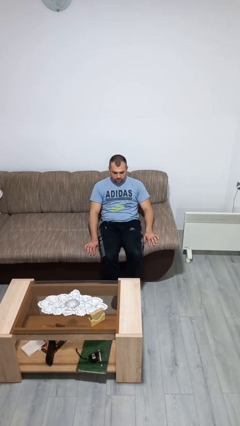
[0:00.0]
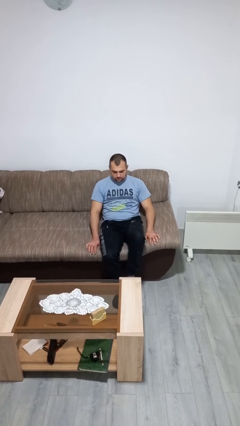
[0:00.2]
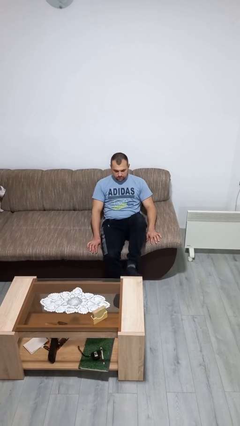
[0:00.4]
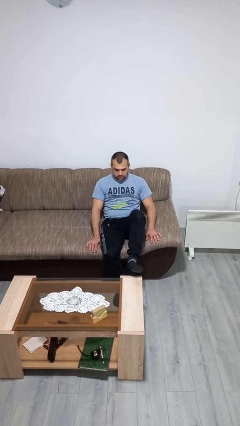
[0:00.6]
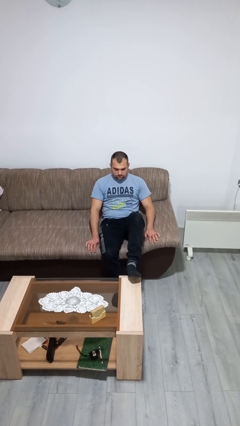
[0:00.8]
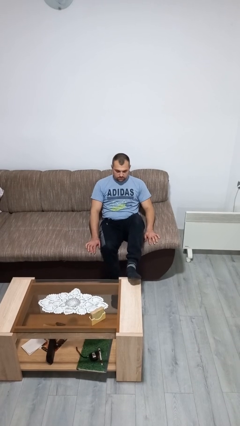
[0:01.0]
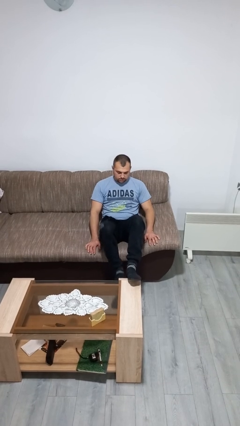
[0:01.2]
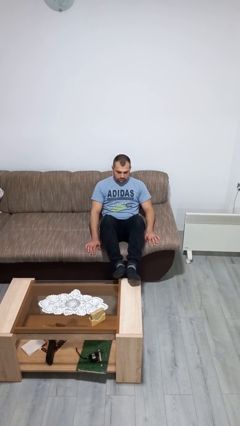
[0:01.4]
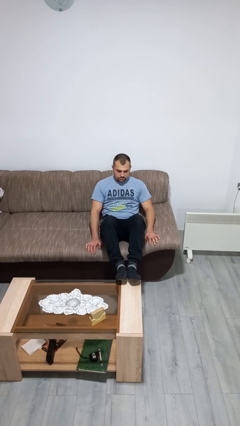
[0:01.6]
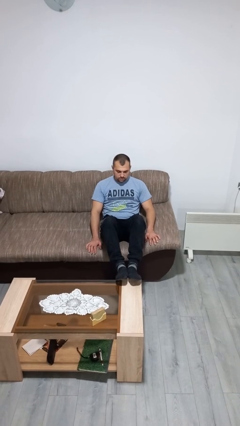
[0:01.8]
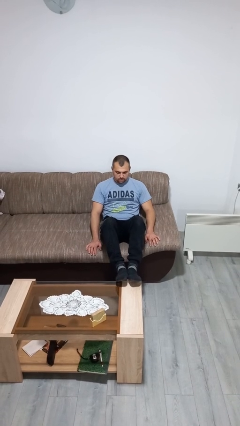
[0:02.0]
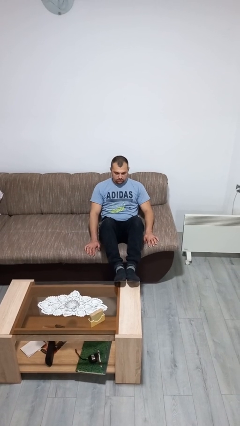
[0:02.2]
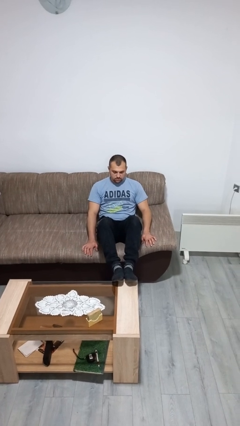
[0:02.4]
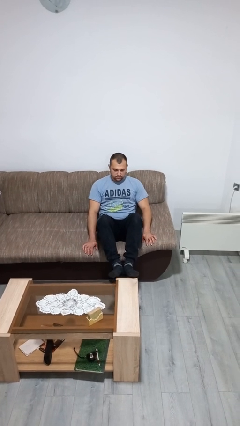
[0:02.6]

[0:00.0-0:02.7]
person puts feet up

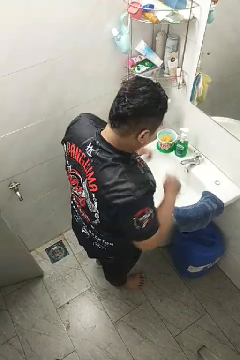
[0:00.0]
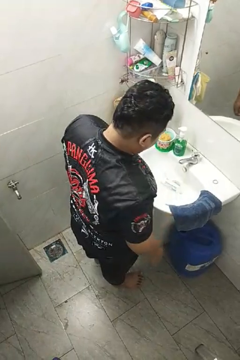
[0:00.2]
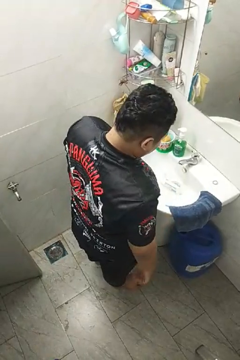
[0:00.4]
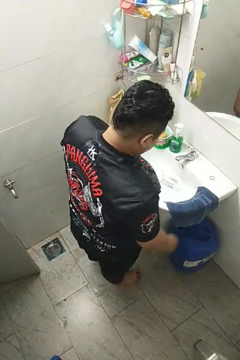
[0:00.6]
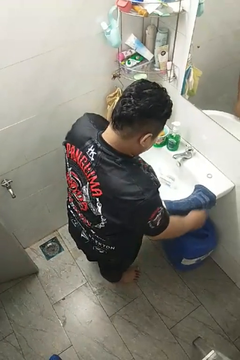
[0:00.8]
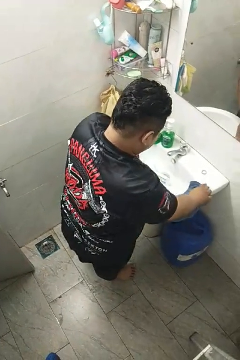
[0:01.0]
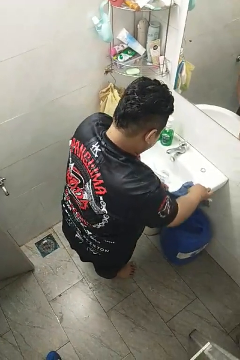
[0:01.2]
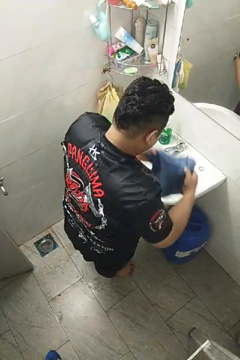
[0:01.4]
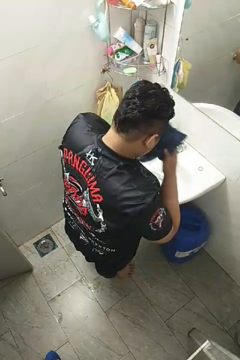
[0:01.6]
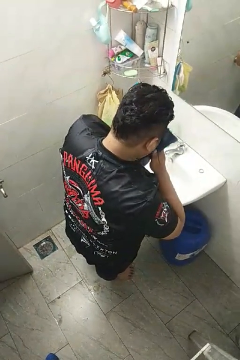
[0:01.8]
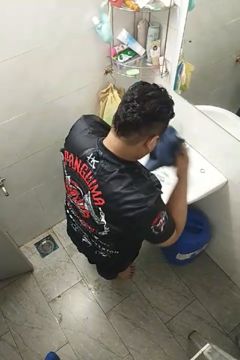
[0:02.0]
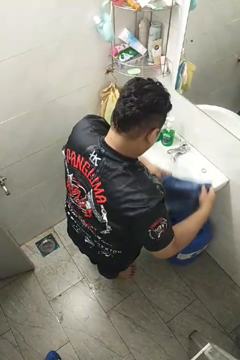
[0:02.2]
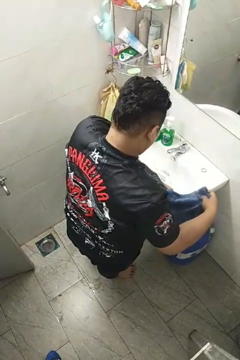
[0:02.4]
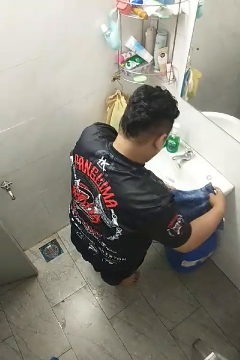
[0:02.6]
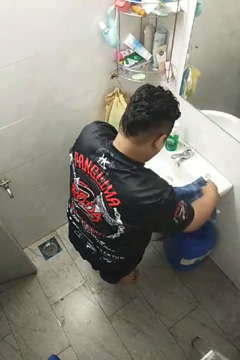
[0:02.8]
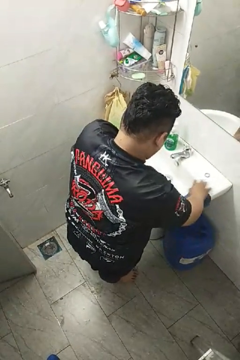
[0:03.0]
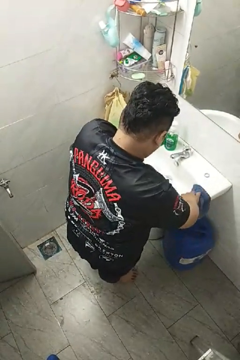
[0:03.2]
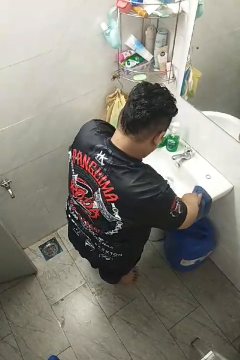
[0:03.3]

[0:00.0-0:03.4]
person dries face with towel

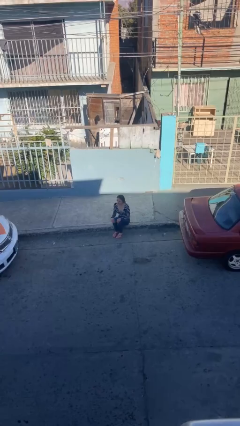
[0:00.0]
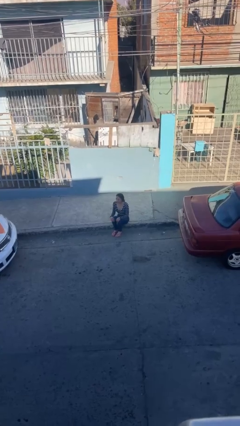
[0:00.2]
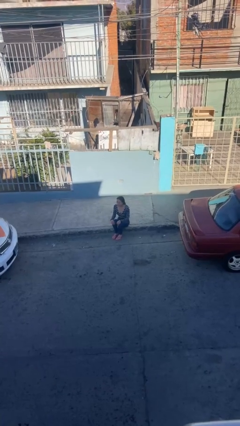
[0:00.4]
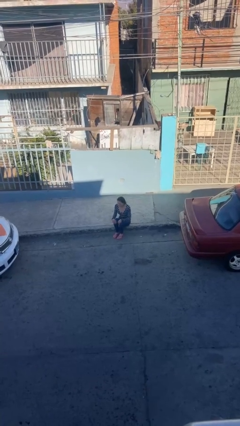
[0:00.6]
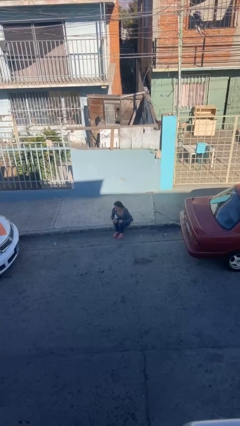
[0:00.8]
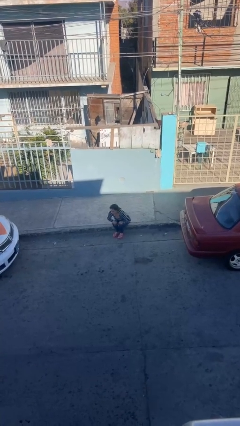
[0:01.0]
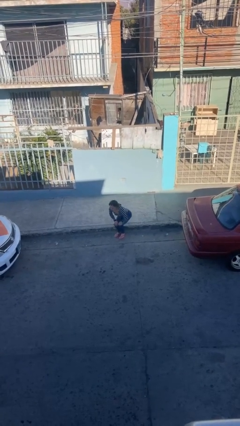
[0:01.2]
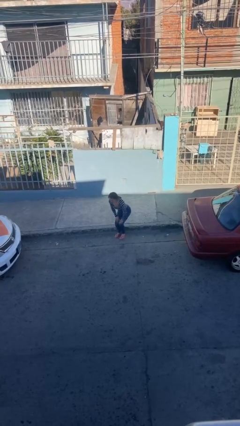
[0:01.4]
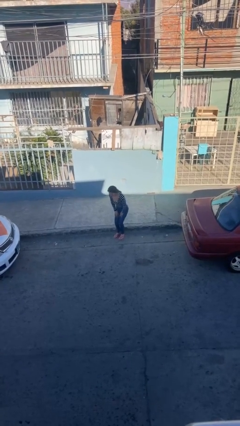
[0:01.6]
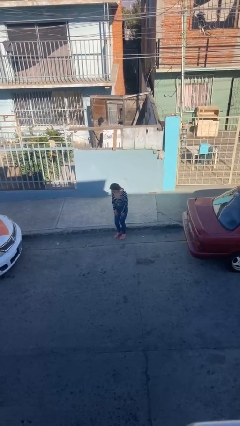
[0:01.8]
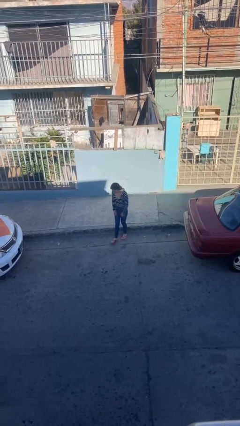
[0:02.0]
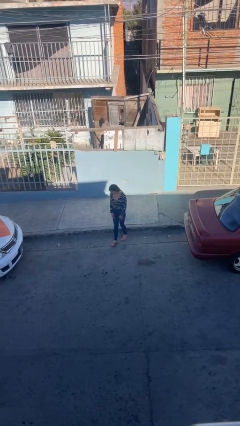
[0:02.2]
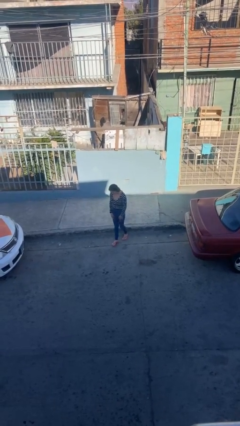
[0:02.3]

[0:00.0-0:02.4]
person stands up

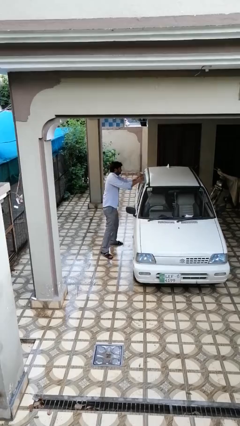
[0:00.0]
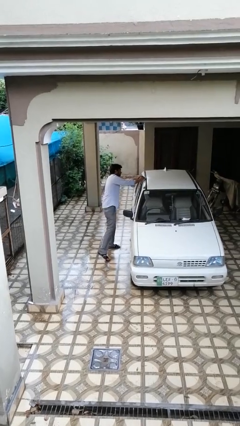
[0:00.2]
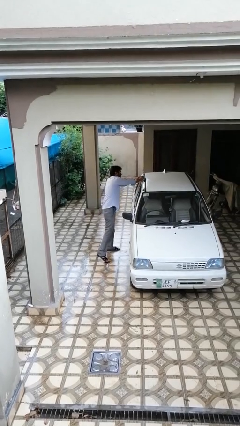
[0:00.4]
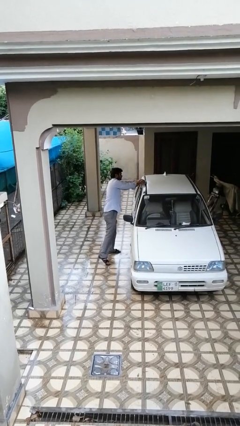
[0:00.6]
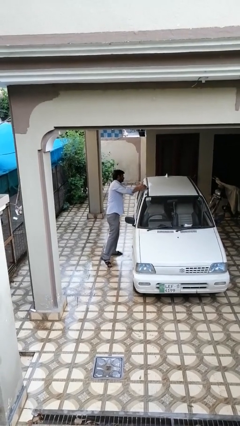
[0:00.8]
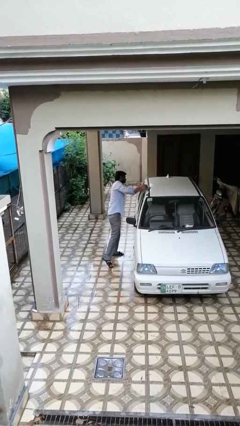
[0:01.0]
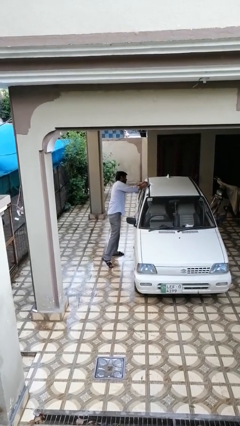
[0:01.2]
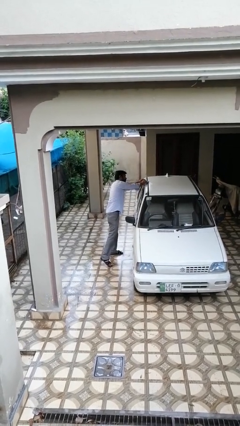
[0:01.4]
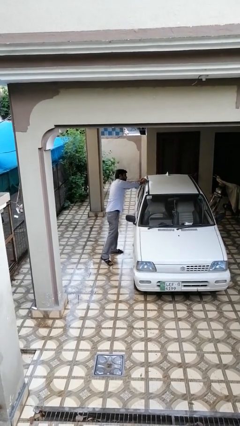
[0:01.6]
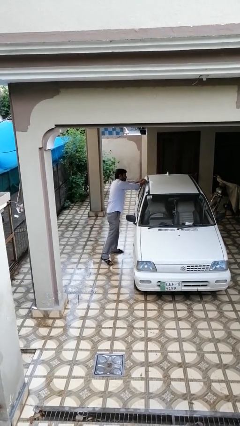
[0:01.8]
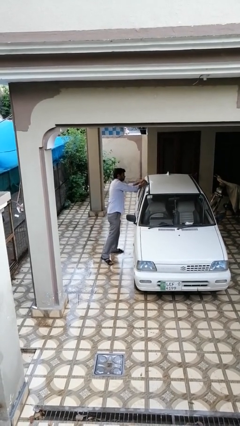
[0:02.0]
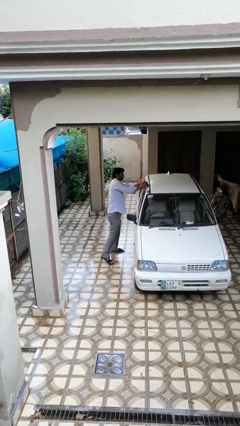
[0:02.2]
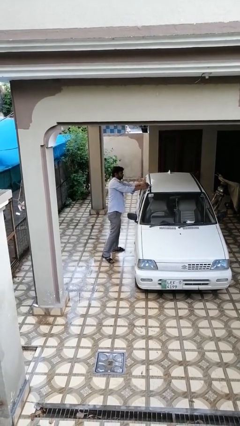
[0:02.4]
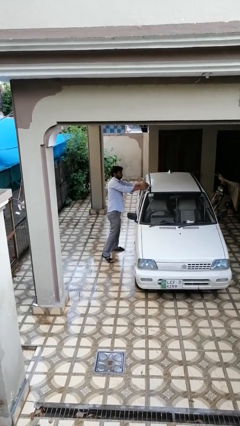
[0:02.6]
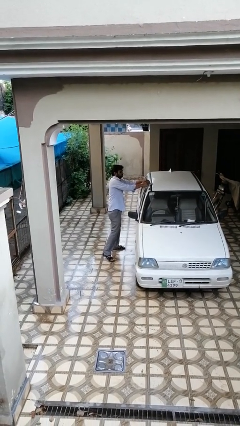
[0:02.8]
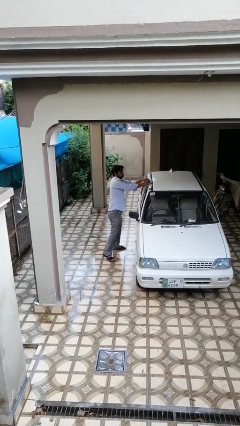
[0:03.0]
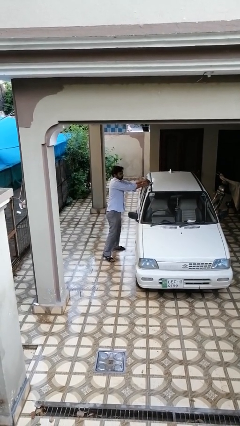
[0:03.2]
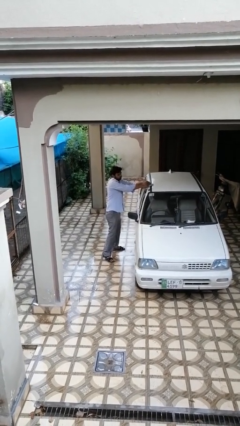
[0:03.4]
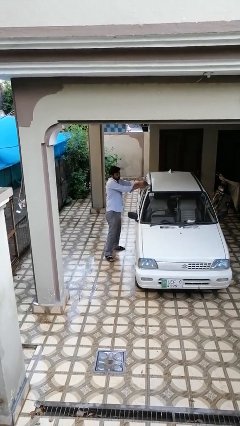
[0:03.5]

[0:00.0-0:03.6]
person polishes car with rag

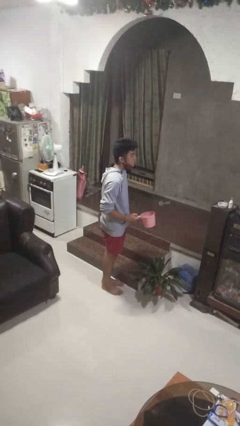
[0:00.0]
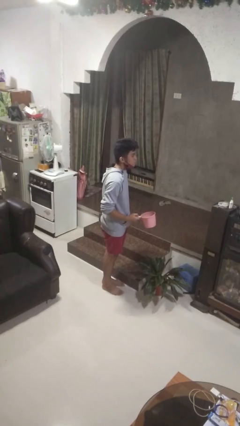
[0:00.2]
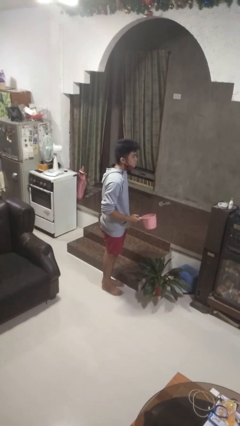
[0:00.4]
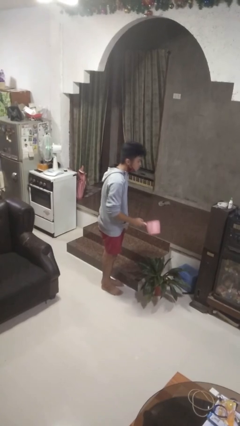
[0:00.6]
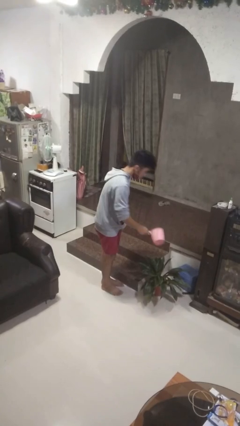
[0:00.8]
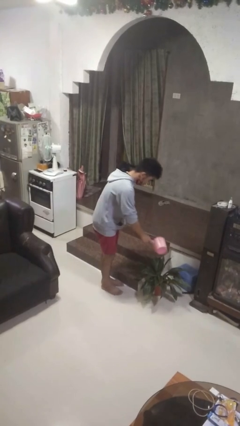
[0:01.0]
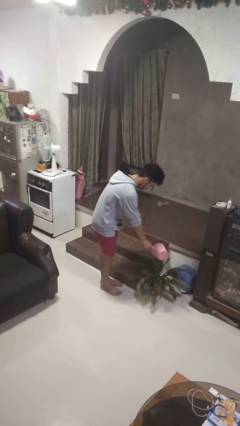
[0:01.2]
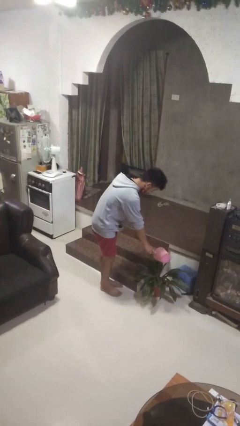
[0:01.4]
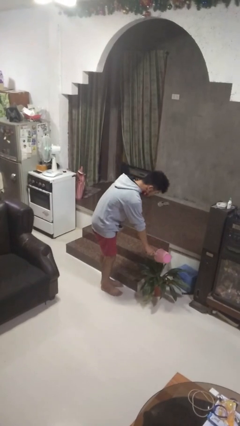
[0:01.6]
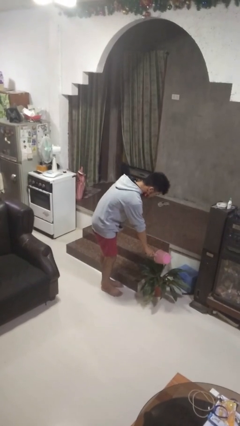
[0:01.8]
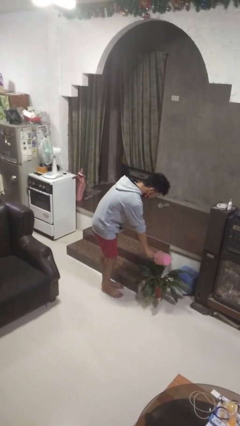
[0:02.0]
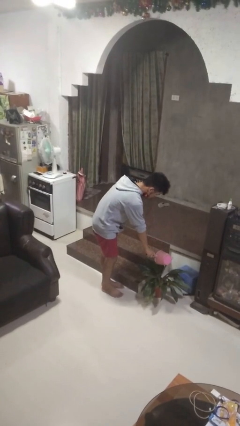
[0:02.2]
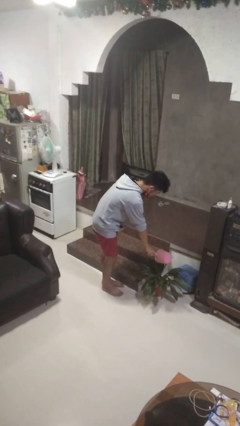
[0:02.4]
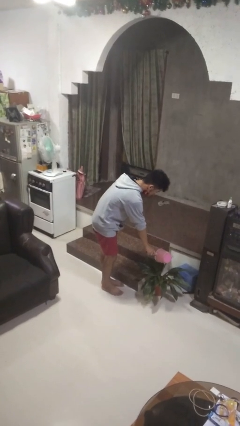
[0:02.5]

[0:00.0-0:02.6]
person waters houseplant

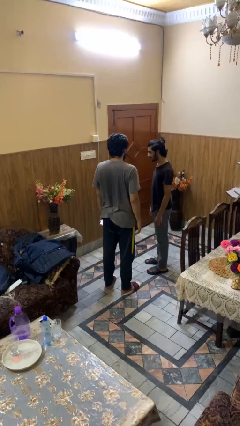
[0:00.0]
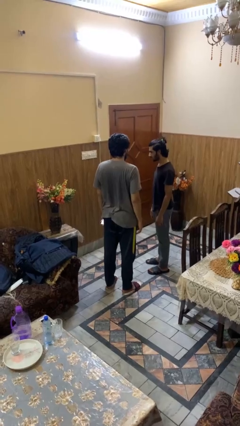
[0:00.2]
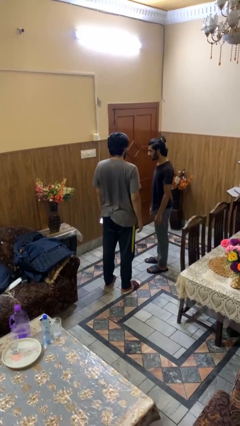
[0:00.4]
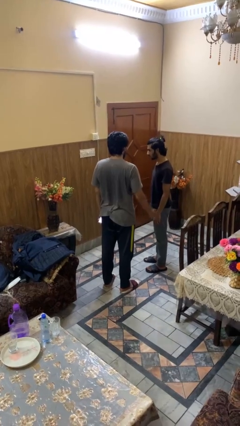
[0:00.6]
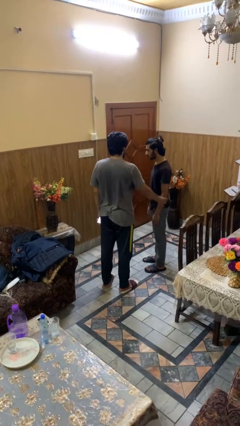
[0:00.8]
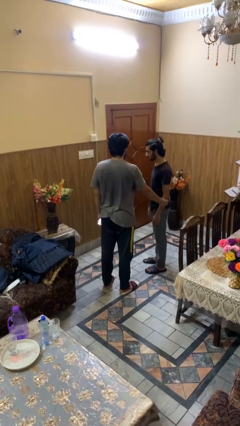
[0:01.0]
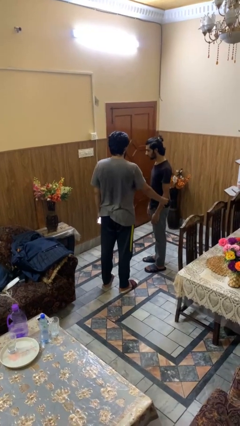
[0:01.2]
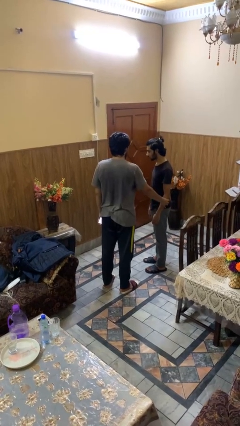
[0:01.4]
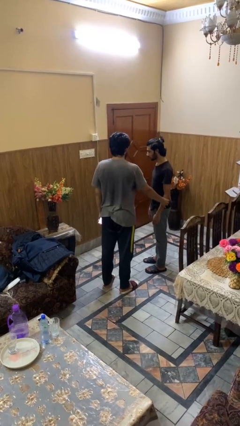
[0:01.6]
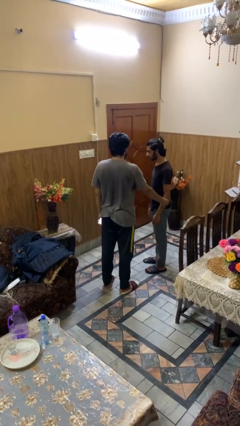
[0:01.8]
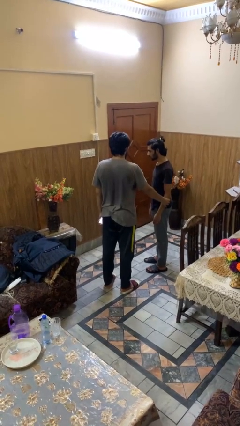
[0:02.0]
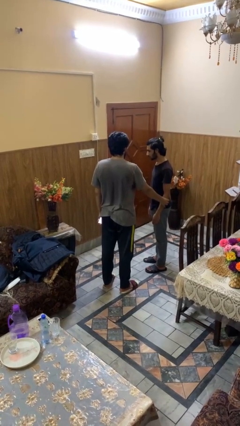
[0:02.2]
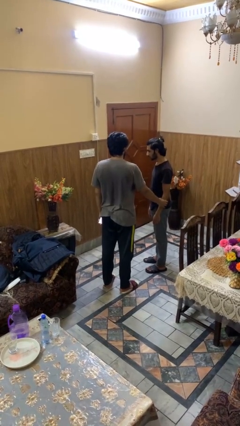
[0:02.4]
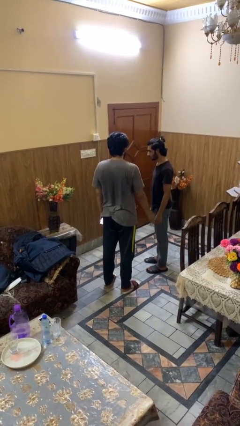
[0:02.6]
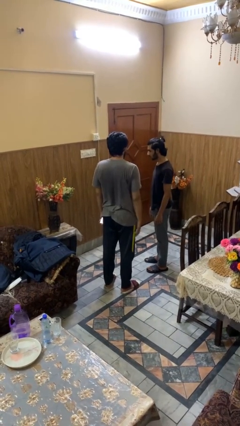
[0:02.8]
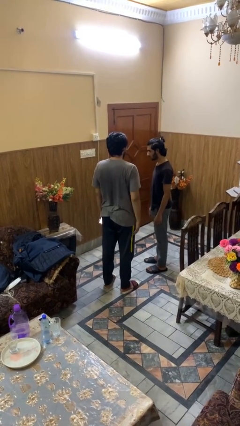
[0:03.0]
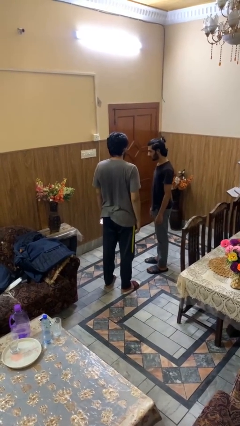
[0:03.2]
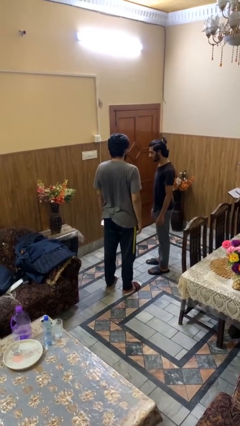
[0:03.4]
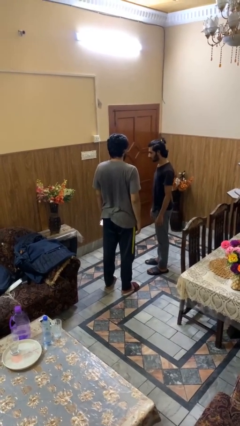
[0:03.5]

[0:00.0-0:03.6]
person grabs person by forearm
